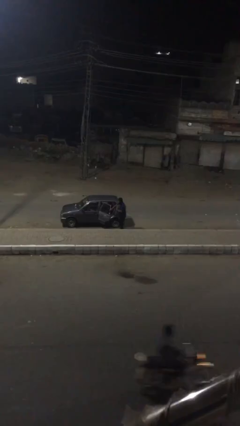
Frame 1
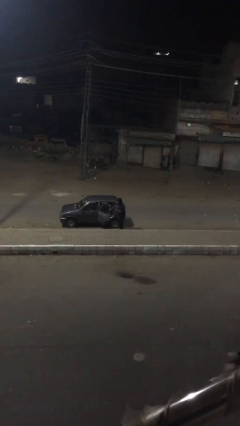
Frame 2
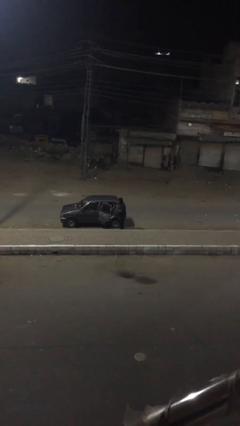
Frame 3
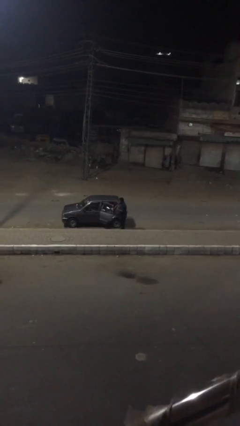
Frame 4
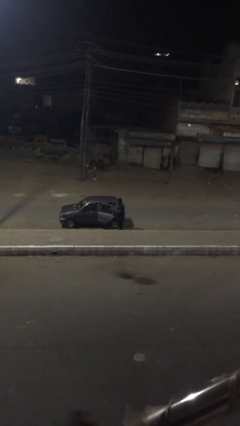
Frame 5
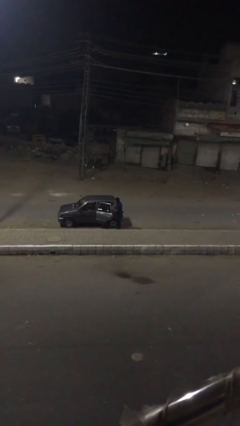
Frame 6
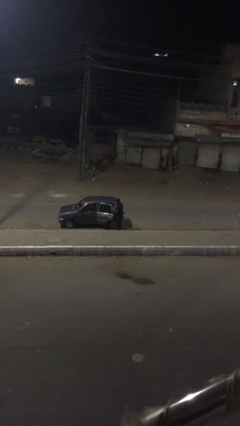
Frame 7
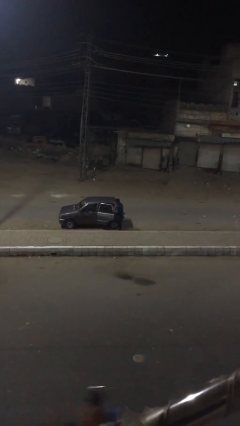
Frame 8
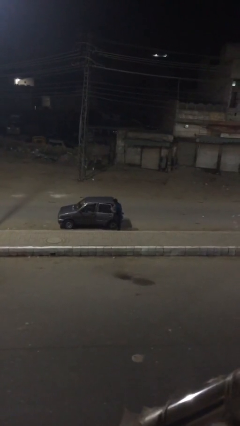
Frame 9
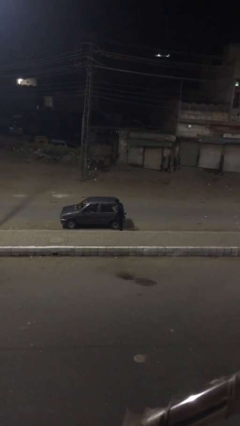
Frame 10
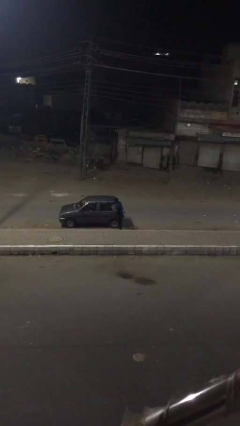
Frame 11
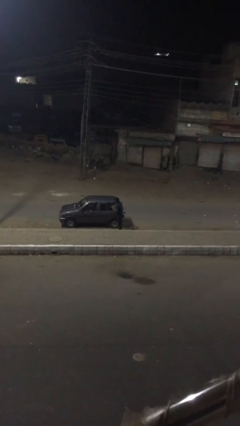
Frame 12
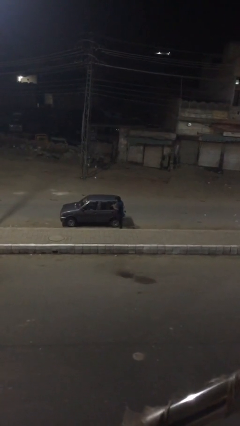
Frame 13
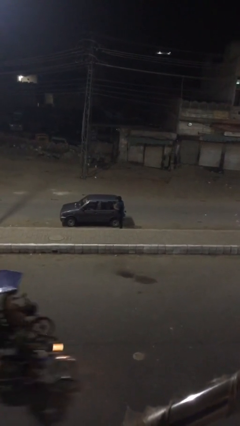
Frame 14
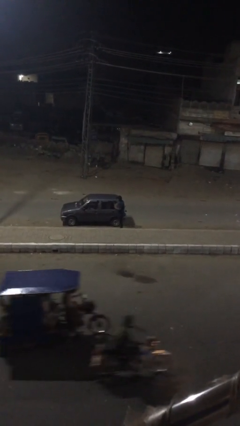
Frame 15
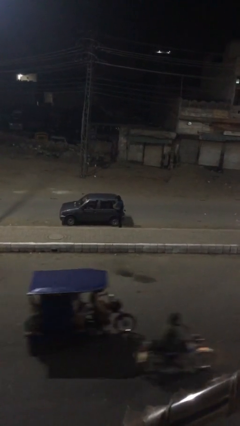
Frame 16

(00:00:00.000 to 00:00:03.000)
person closes car door

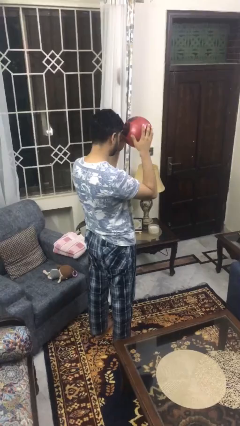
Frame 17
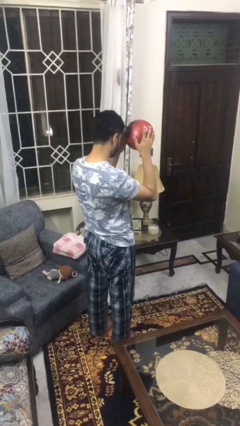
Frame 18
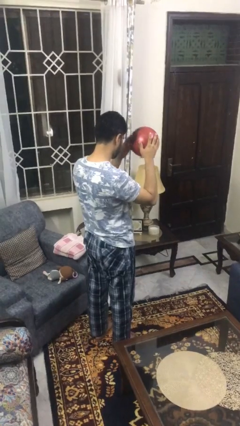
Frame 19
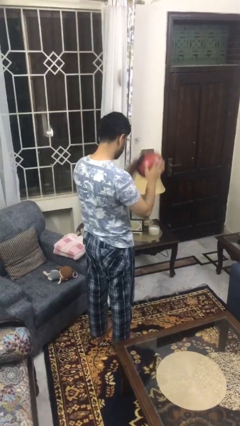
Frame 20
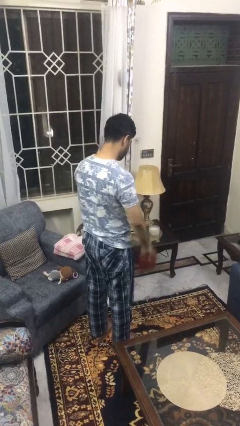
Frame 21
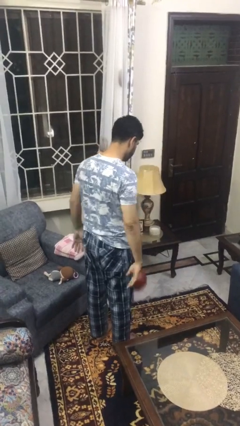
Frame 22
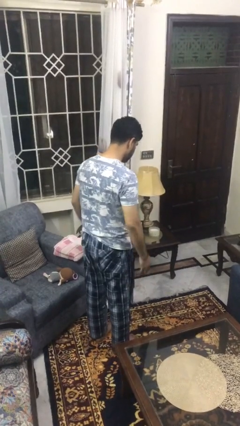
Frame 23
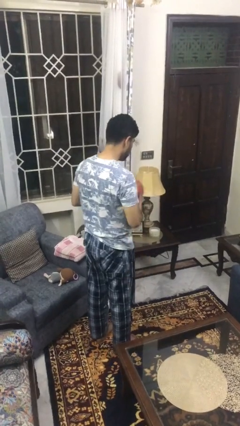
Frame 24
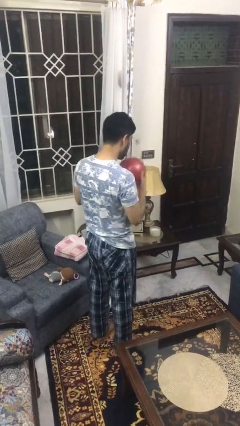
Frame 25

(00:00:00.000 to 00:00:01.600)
person bounces ball on floor

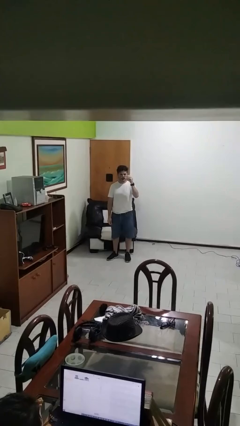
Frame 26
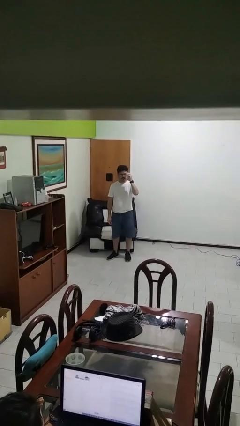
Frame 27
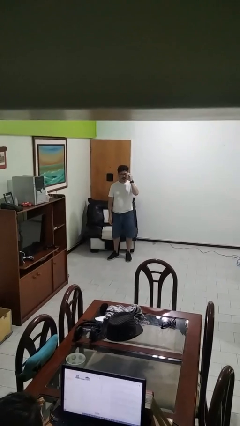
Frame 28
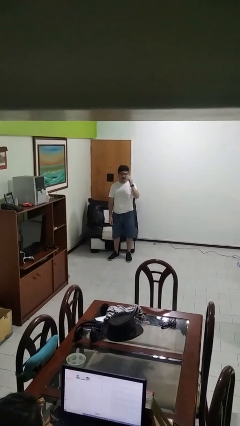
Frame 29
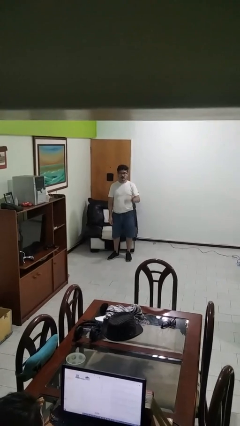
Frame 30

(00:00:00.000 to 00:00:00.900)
person puts on glasses

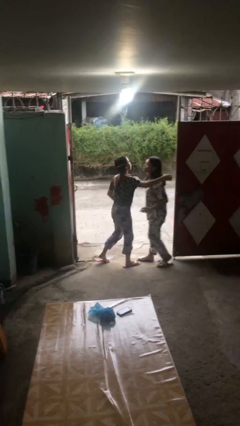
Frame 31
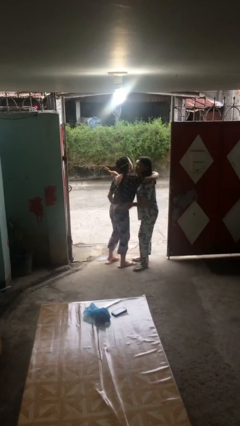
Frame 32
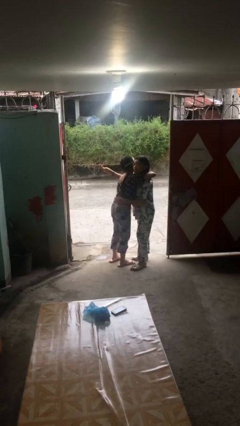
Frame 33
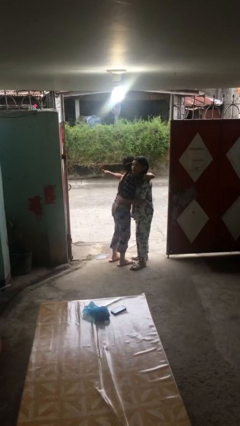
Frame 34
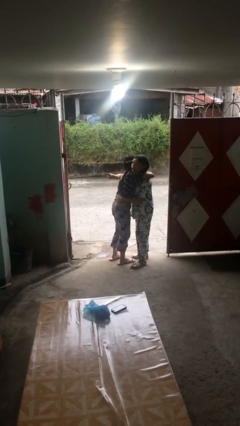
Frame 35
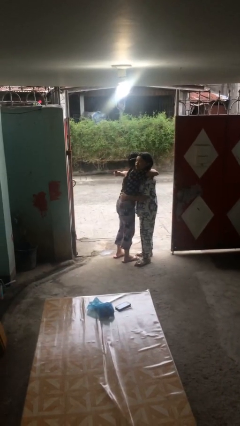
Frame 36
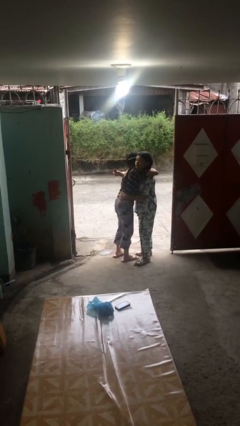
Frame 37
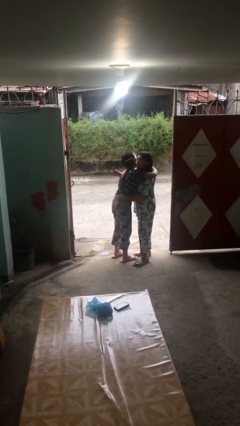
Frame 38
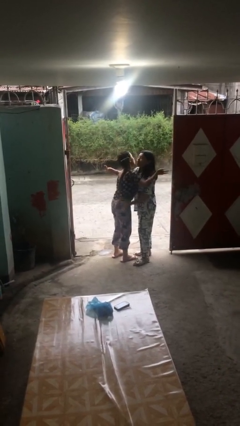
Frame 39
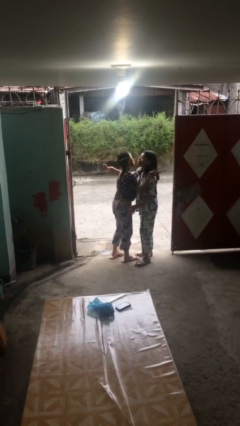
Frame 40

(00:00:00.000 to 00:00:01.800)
person embraces person

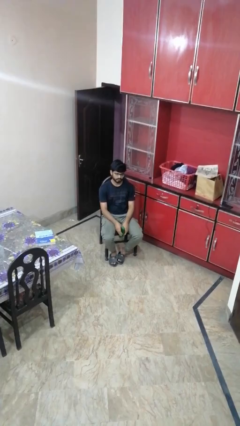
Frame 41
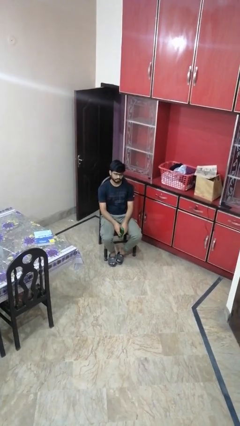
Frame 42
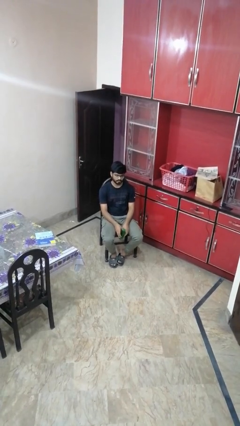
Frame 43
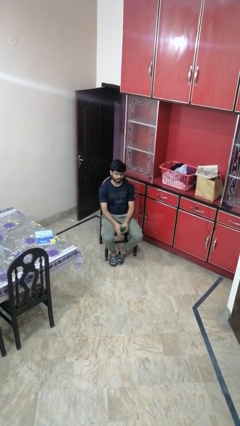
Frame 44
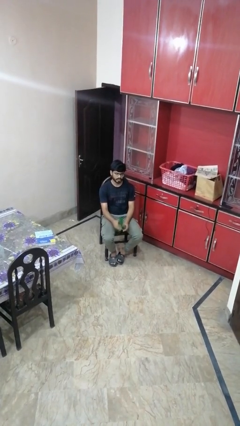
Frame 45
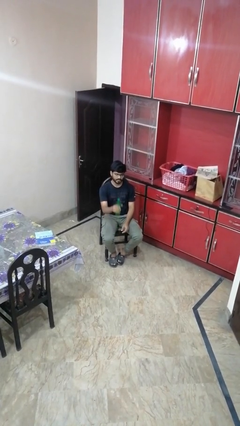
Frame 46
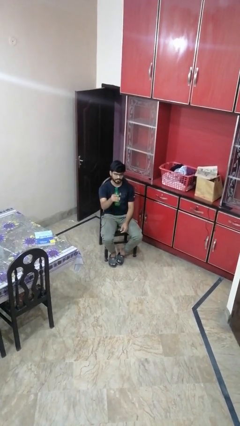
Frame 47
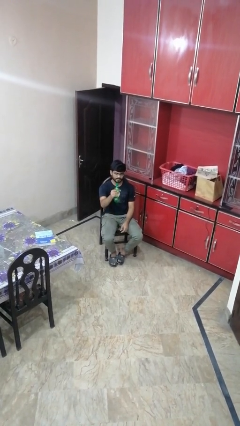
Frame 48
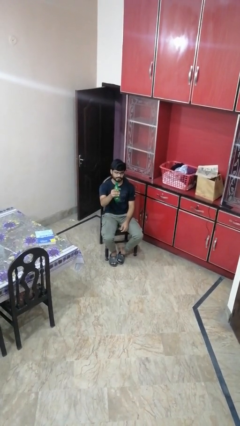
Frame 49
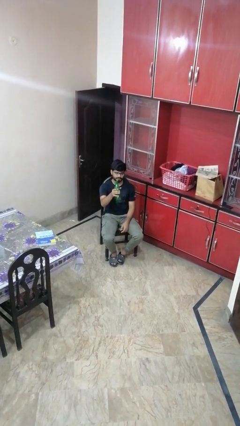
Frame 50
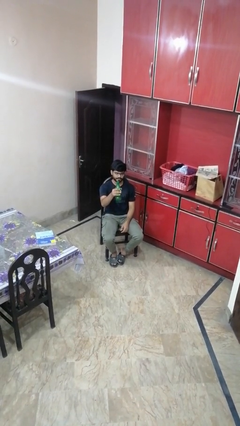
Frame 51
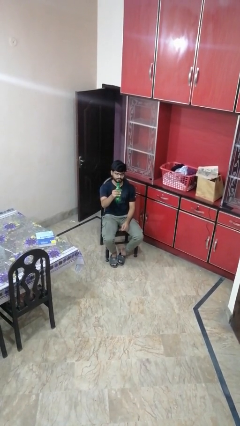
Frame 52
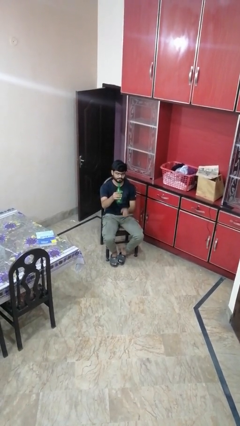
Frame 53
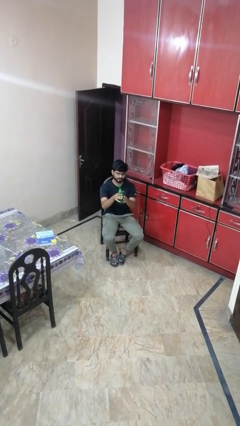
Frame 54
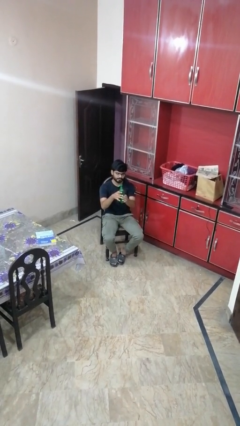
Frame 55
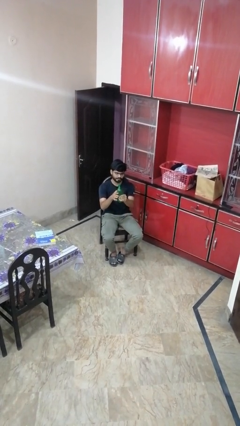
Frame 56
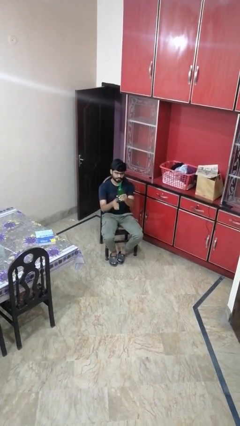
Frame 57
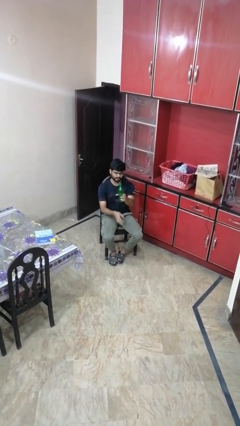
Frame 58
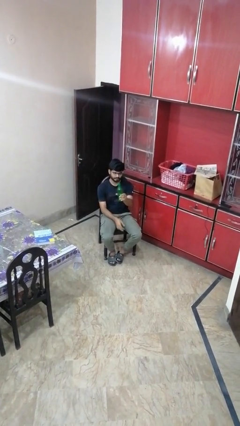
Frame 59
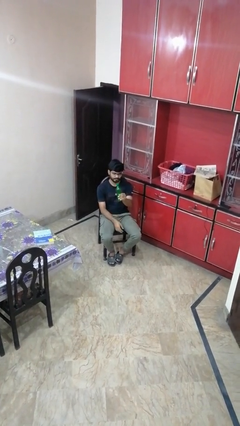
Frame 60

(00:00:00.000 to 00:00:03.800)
person squeezes object

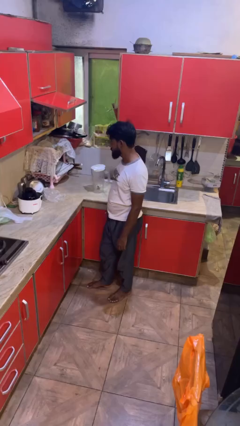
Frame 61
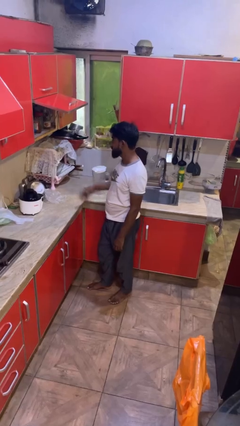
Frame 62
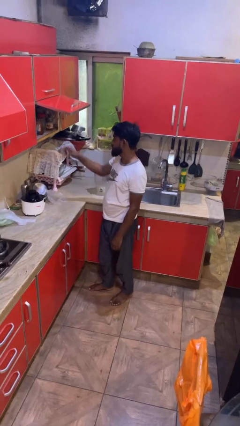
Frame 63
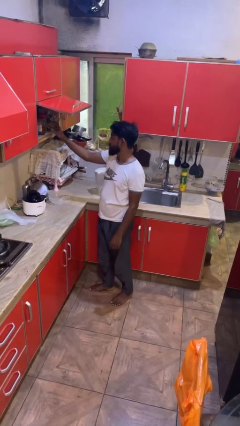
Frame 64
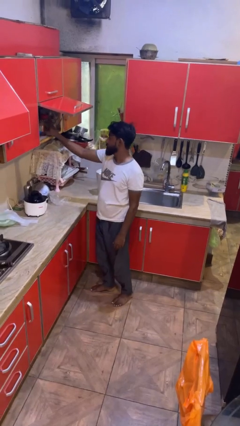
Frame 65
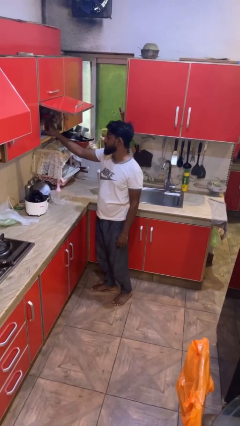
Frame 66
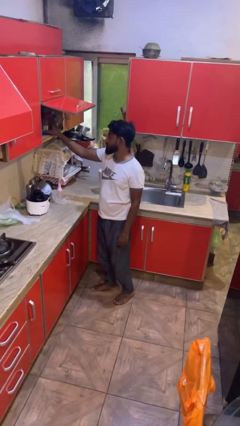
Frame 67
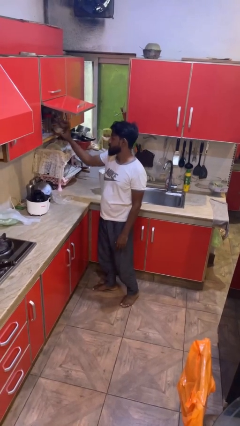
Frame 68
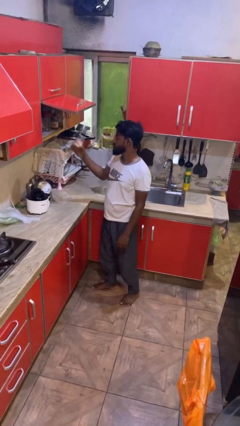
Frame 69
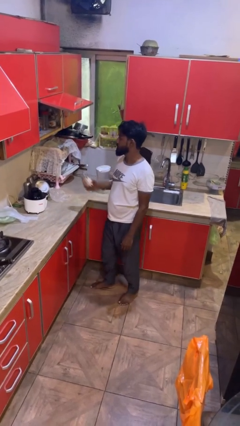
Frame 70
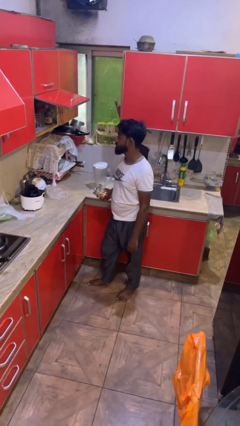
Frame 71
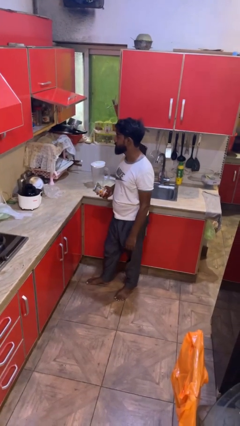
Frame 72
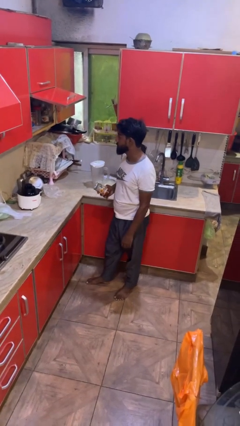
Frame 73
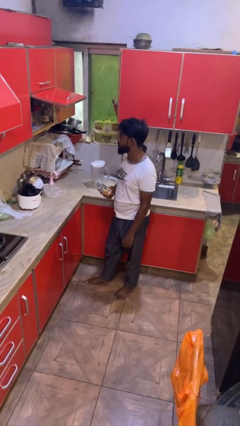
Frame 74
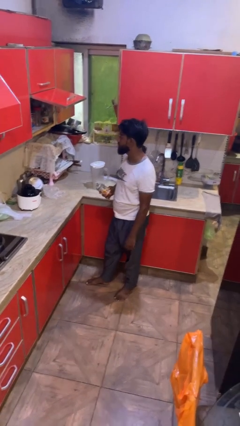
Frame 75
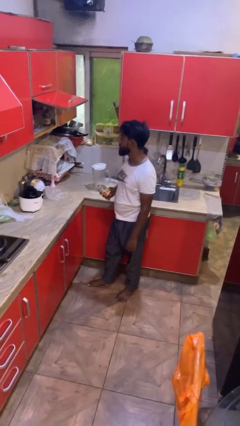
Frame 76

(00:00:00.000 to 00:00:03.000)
person picks up object from cabinet

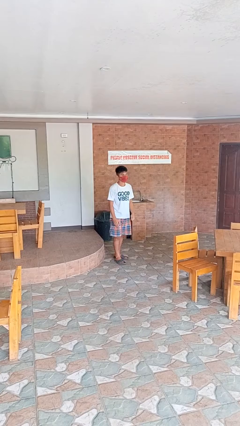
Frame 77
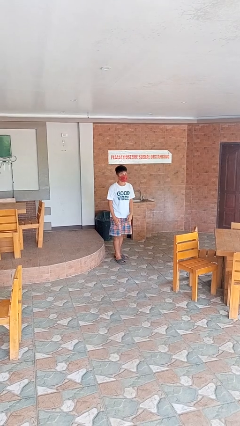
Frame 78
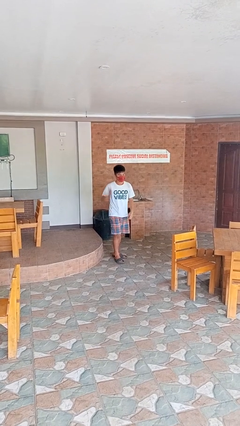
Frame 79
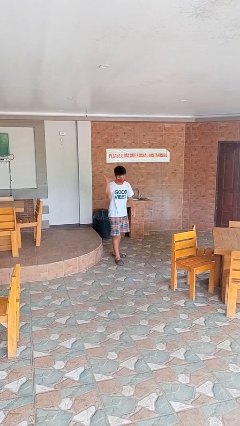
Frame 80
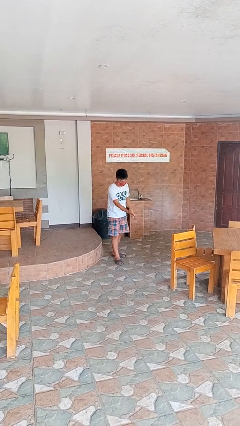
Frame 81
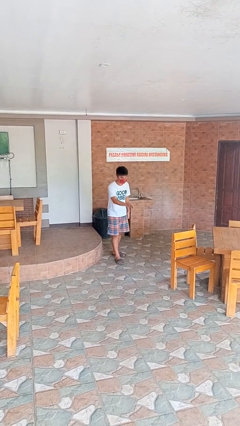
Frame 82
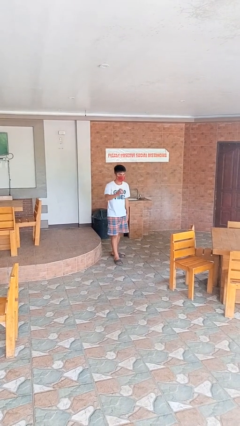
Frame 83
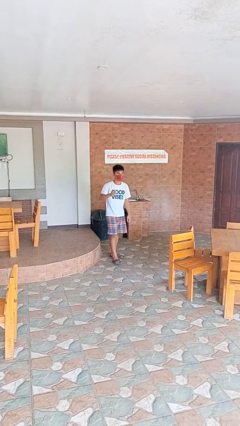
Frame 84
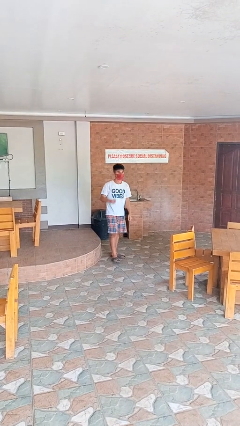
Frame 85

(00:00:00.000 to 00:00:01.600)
person karate chop

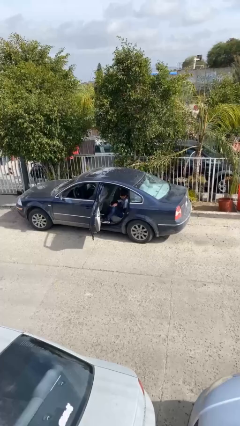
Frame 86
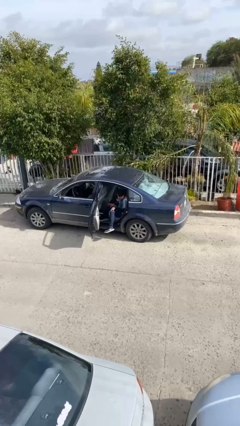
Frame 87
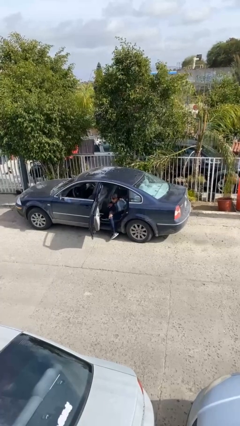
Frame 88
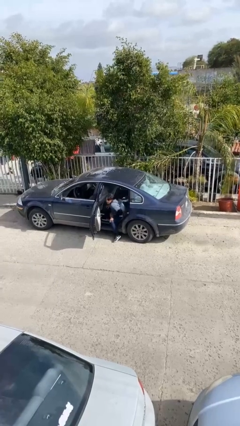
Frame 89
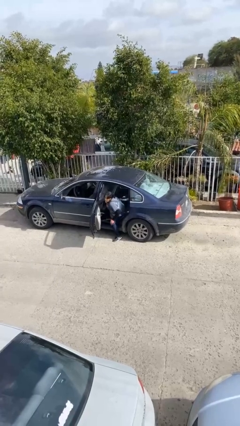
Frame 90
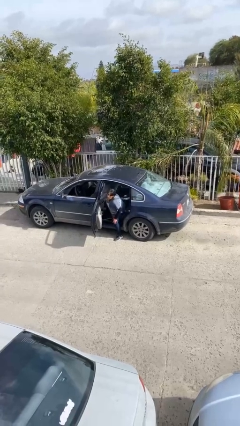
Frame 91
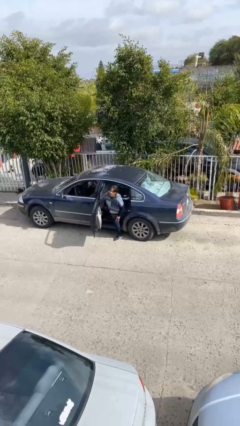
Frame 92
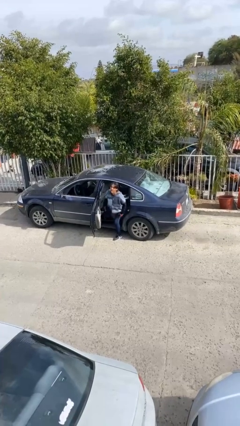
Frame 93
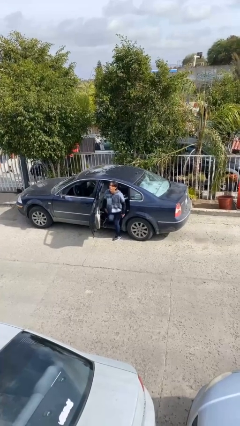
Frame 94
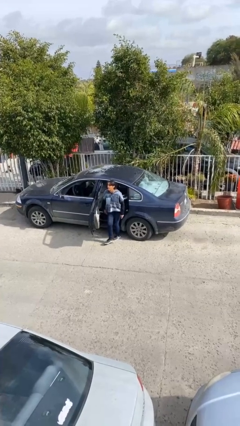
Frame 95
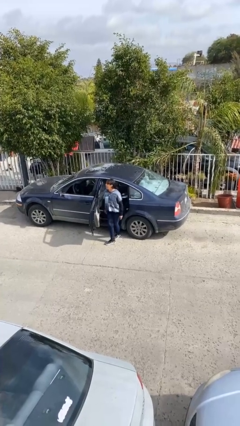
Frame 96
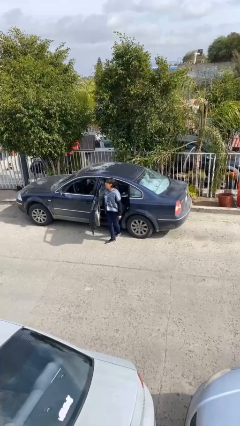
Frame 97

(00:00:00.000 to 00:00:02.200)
person exits car
